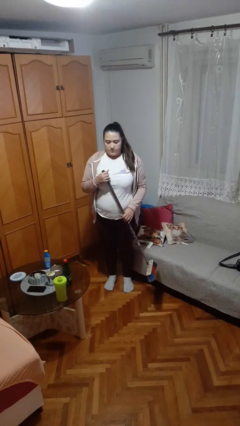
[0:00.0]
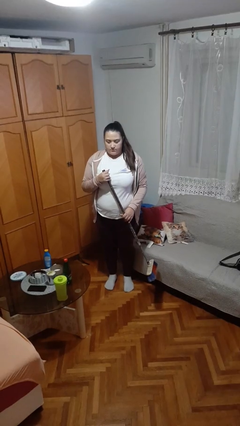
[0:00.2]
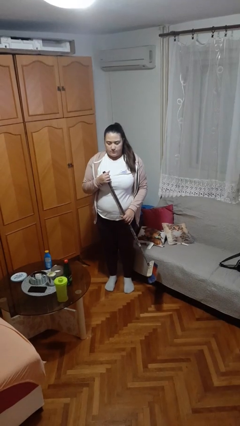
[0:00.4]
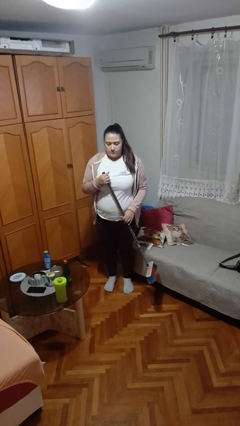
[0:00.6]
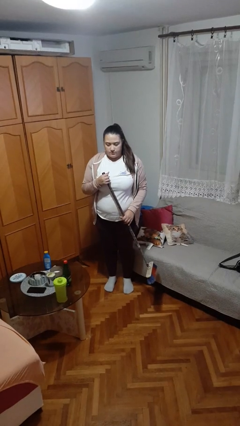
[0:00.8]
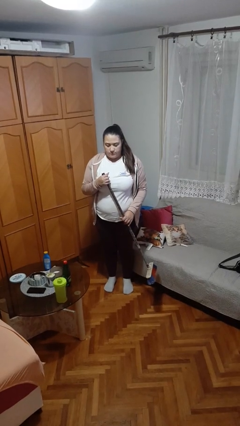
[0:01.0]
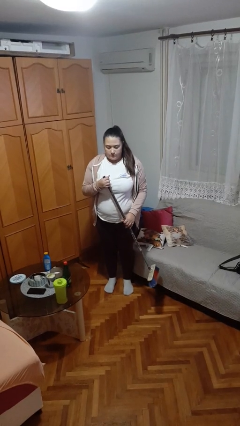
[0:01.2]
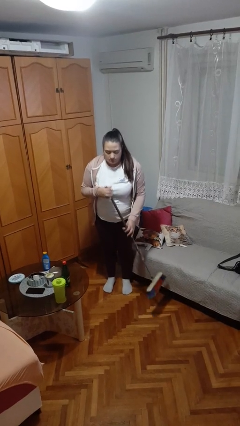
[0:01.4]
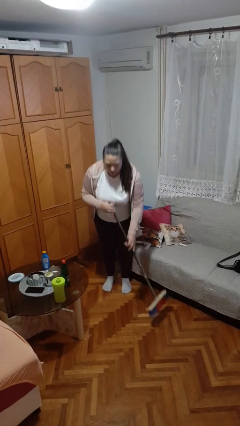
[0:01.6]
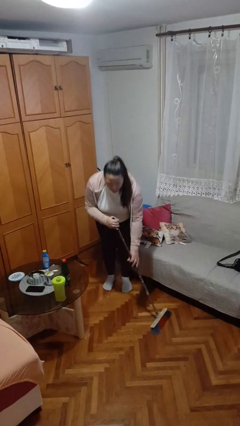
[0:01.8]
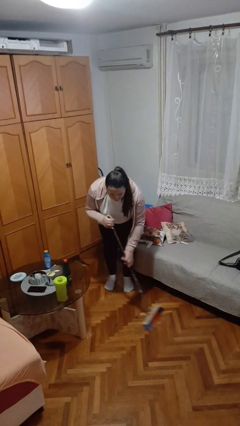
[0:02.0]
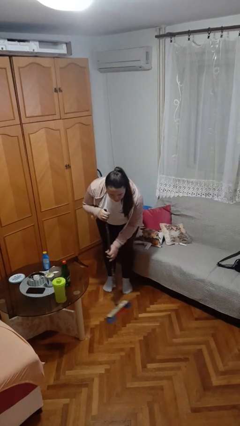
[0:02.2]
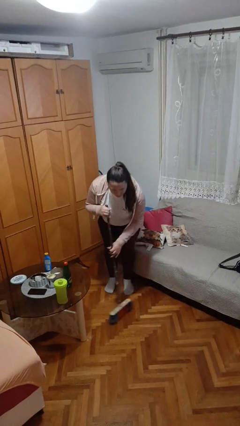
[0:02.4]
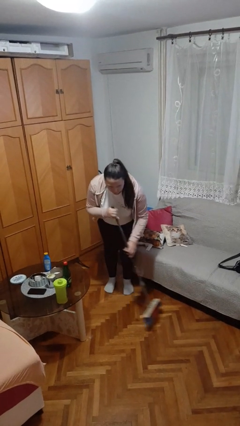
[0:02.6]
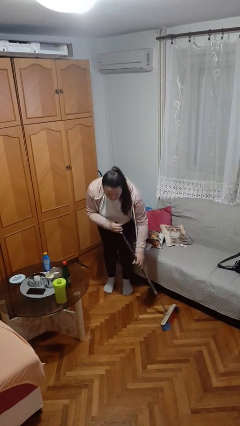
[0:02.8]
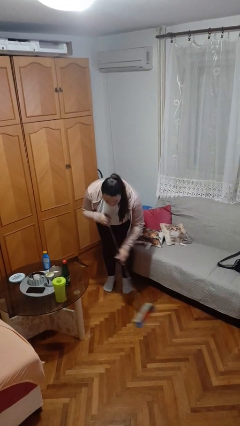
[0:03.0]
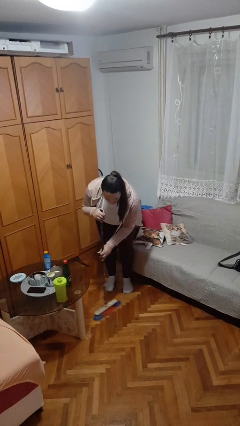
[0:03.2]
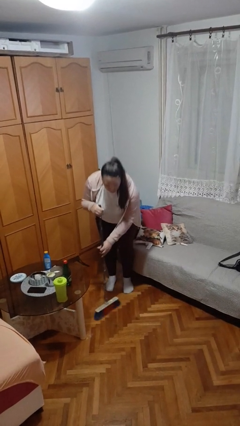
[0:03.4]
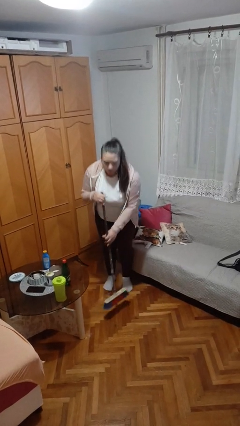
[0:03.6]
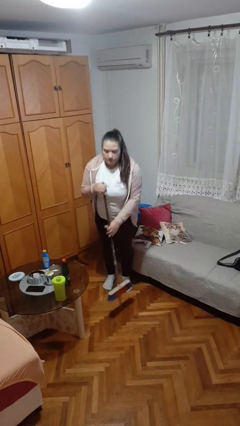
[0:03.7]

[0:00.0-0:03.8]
person sweeps floor

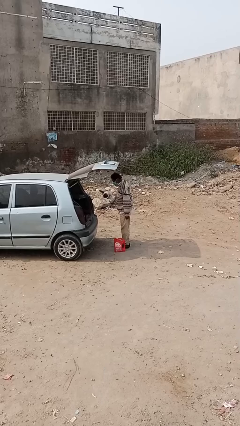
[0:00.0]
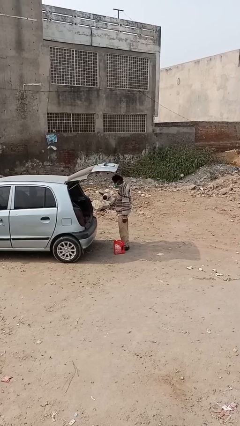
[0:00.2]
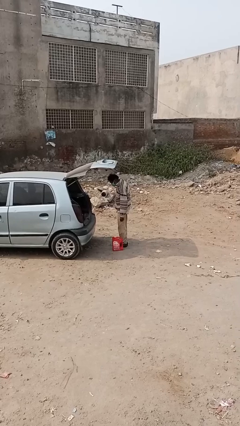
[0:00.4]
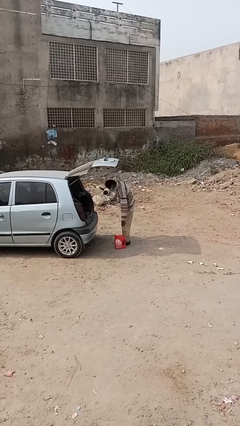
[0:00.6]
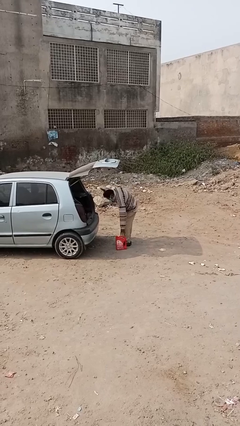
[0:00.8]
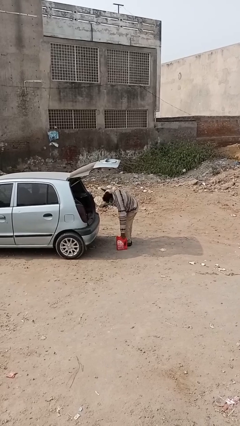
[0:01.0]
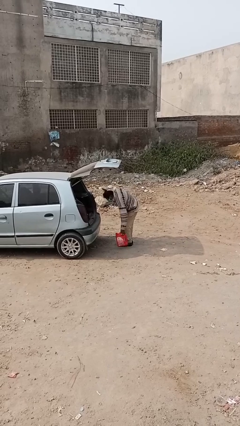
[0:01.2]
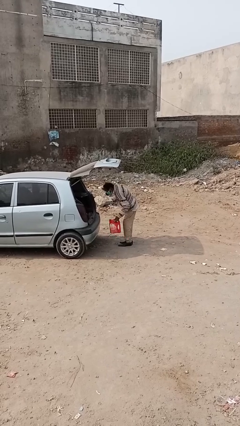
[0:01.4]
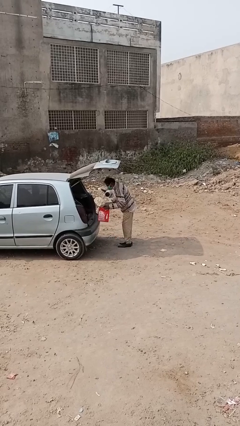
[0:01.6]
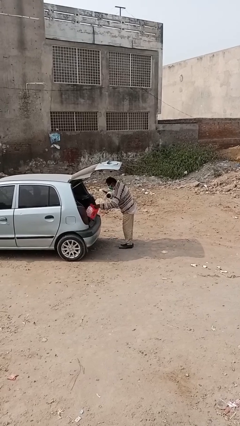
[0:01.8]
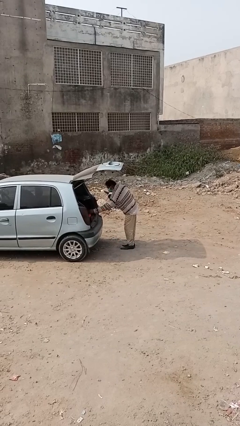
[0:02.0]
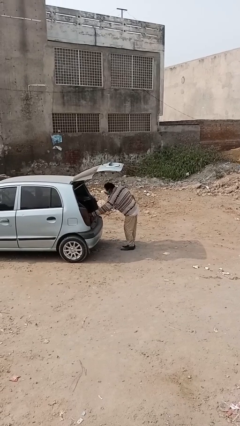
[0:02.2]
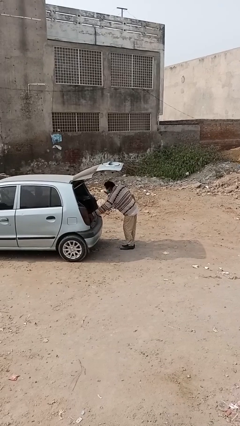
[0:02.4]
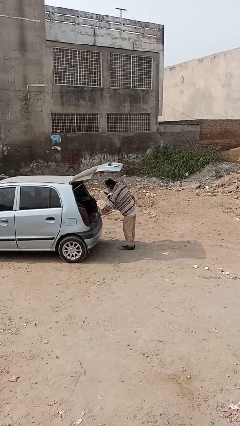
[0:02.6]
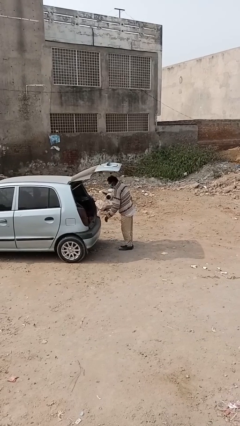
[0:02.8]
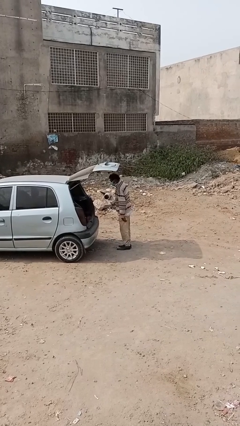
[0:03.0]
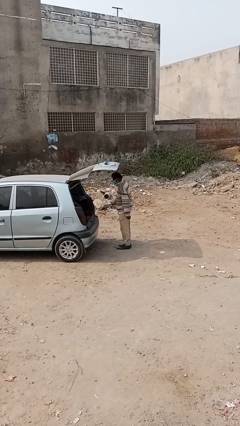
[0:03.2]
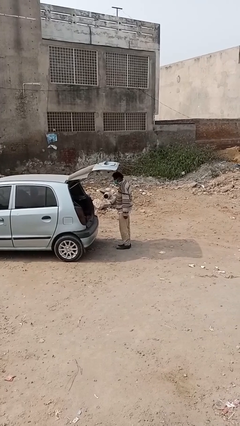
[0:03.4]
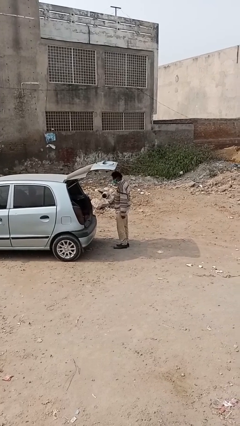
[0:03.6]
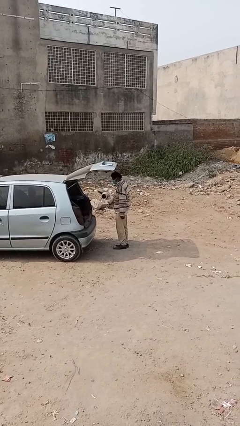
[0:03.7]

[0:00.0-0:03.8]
person loads car

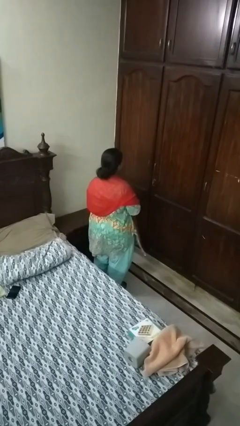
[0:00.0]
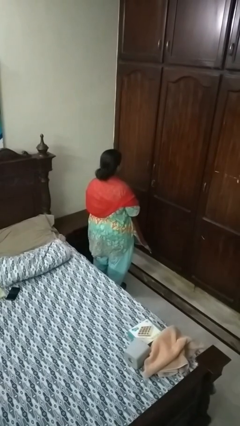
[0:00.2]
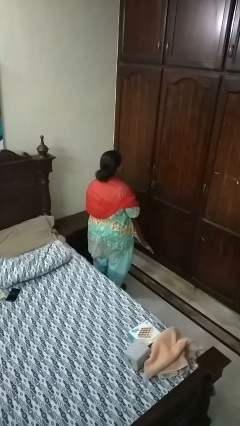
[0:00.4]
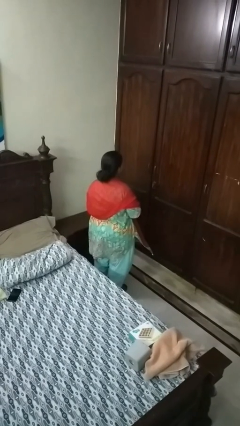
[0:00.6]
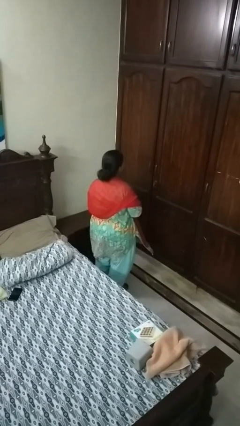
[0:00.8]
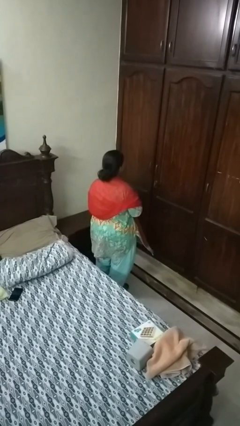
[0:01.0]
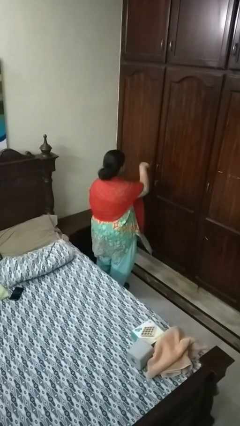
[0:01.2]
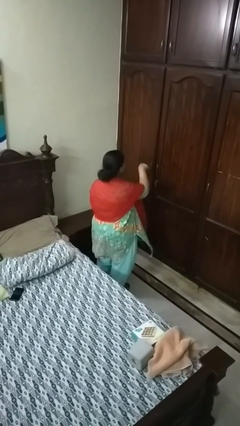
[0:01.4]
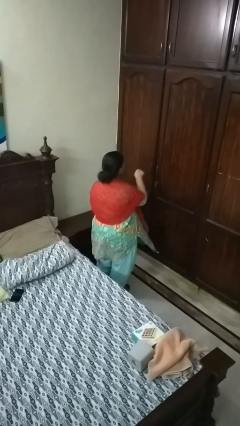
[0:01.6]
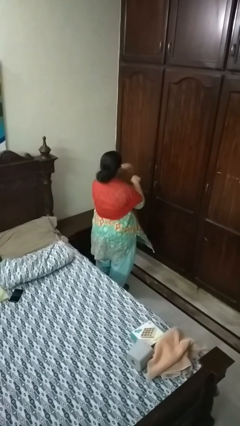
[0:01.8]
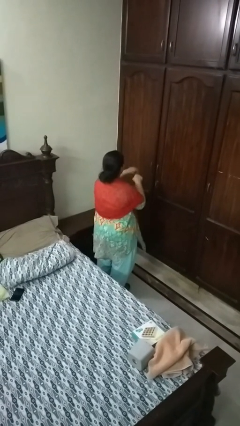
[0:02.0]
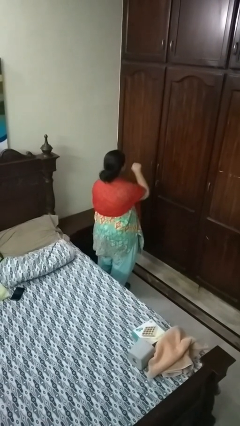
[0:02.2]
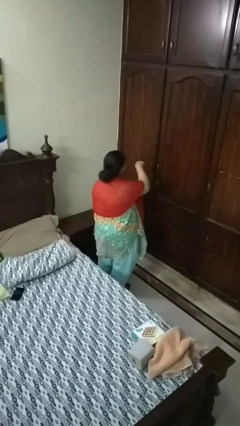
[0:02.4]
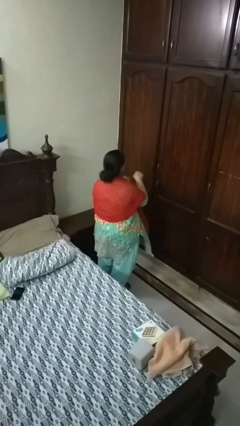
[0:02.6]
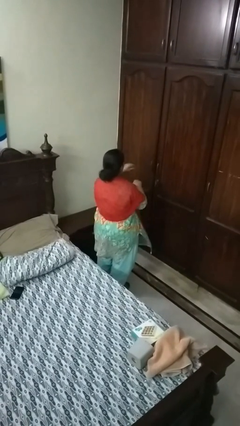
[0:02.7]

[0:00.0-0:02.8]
person punches

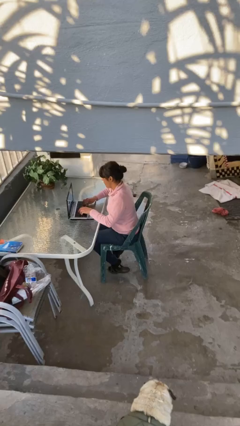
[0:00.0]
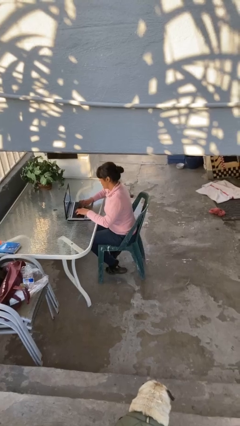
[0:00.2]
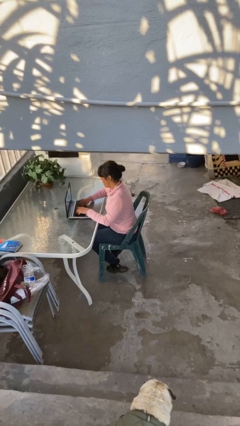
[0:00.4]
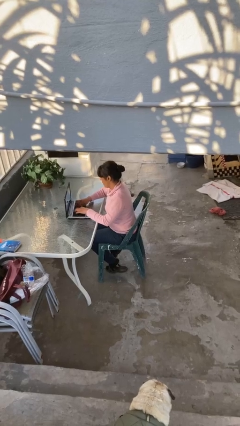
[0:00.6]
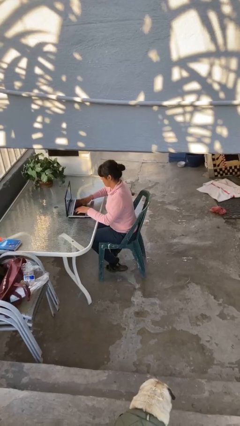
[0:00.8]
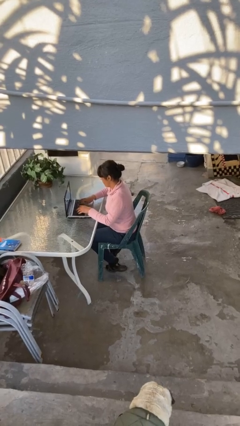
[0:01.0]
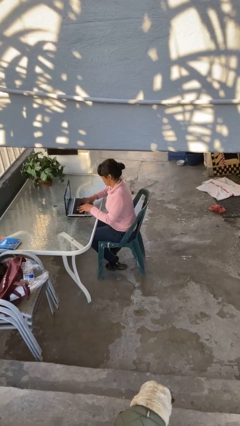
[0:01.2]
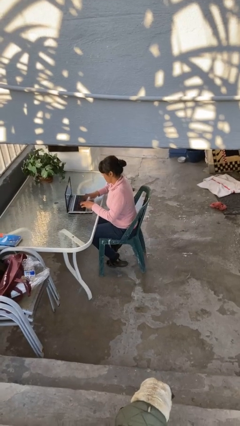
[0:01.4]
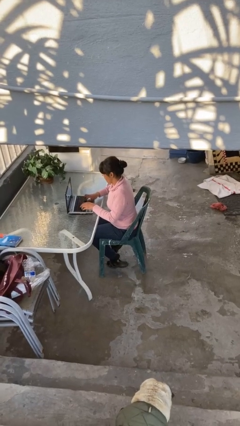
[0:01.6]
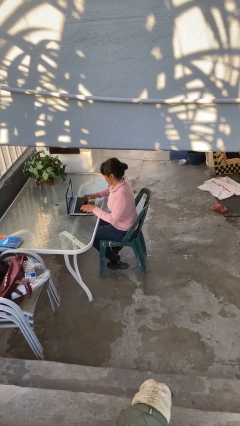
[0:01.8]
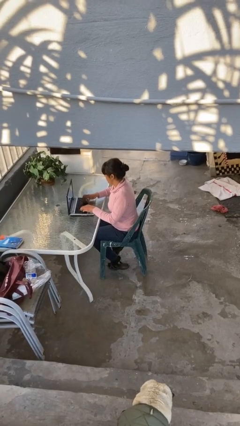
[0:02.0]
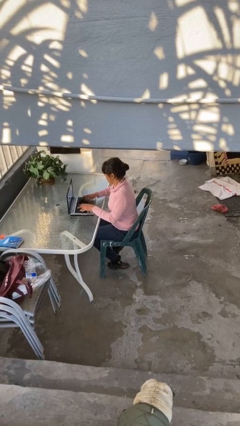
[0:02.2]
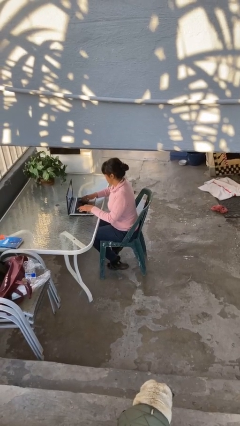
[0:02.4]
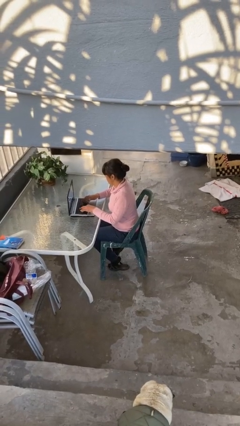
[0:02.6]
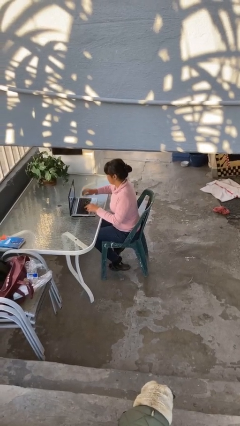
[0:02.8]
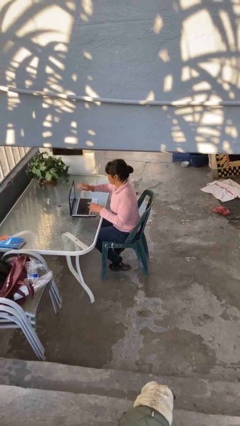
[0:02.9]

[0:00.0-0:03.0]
person interacts with laptop

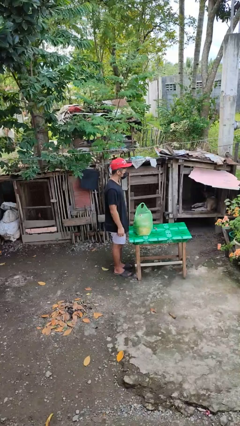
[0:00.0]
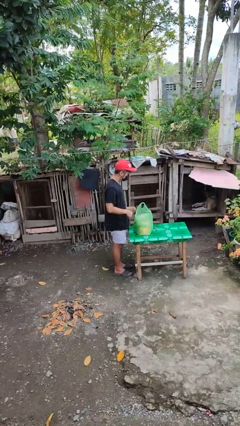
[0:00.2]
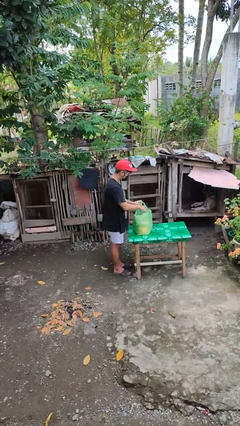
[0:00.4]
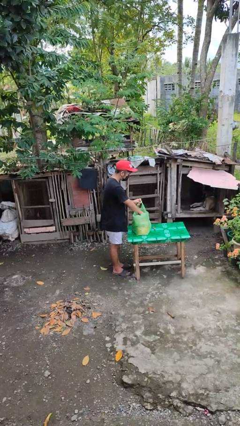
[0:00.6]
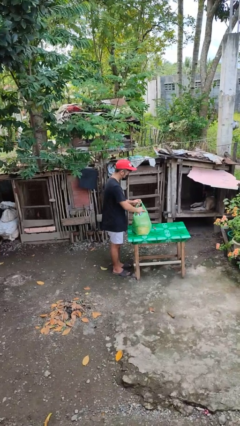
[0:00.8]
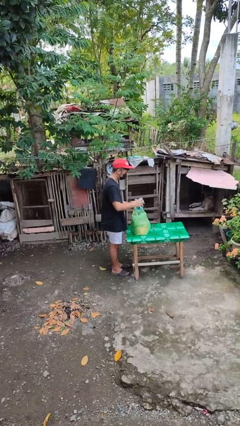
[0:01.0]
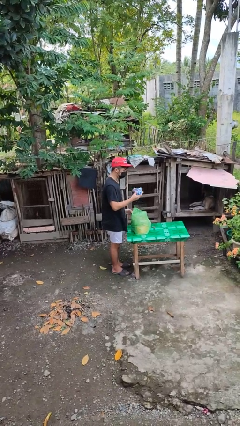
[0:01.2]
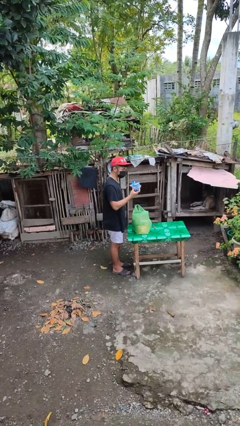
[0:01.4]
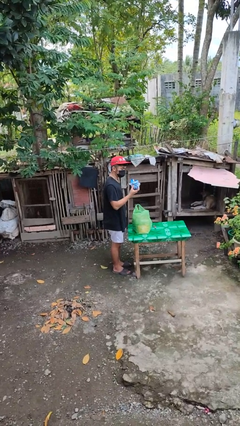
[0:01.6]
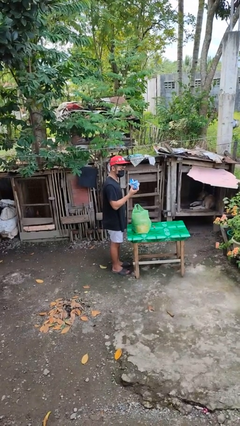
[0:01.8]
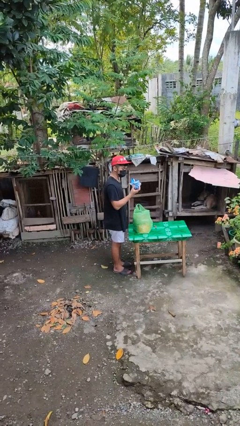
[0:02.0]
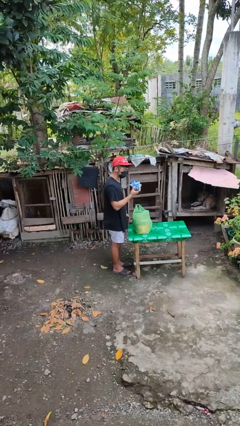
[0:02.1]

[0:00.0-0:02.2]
person takes object from bag

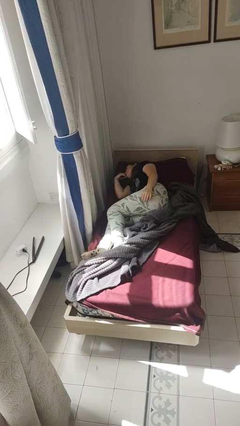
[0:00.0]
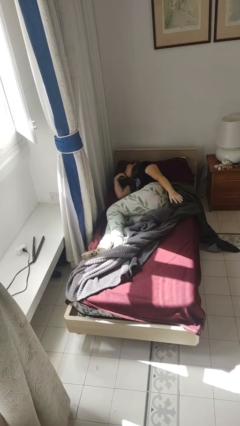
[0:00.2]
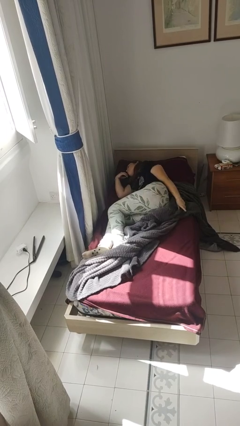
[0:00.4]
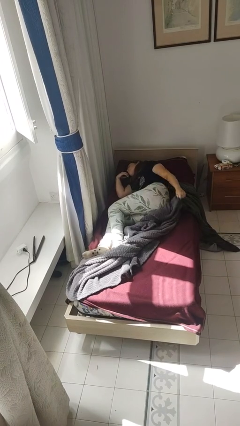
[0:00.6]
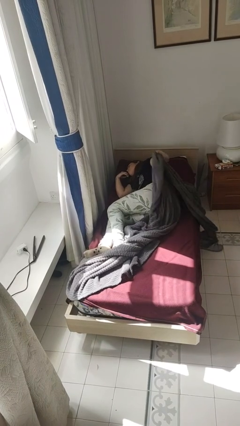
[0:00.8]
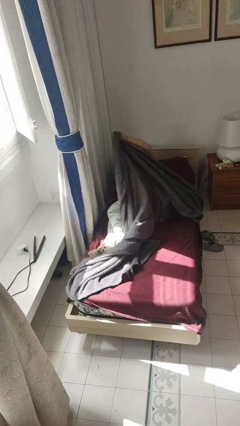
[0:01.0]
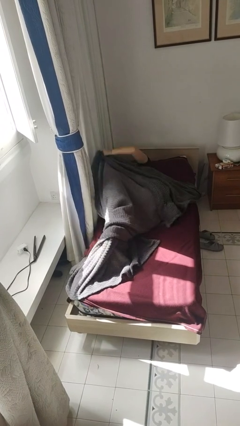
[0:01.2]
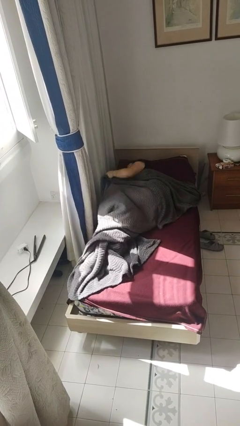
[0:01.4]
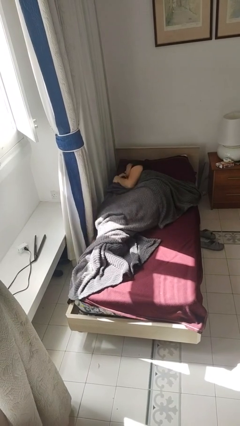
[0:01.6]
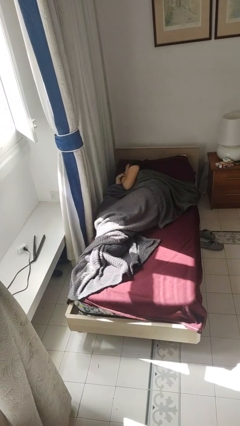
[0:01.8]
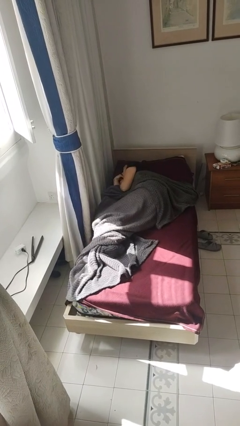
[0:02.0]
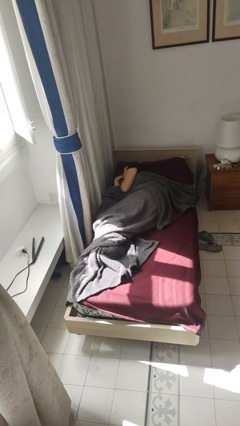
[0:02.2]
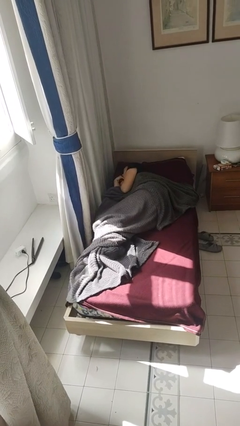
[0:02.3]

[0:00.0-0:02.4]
person covers with bedsheets
